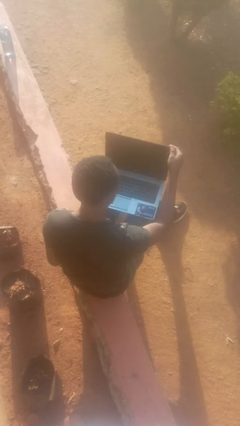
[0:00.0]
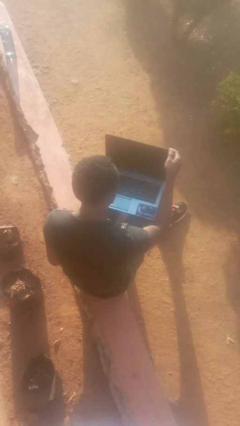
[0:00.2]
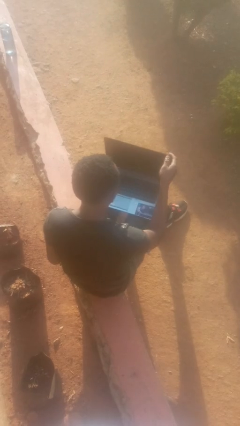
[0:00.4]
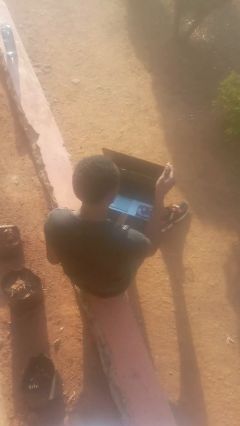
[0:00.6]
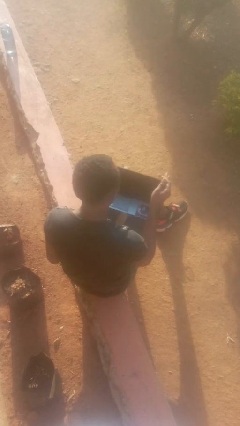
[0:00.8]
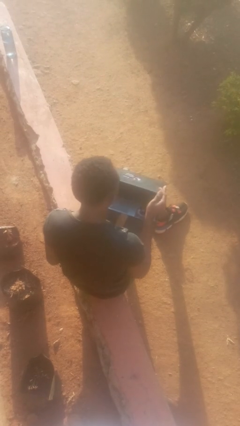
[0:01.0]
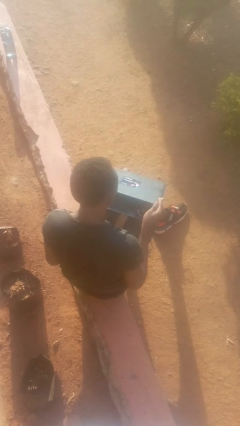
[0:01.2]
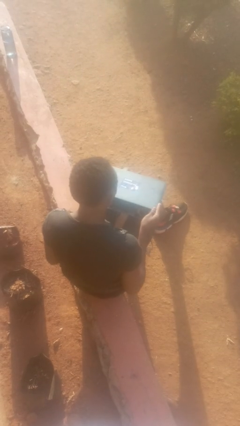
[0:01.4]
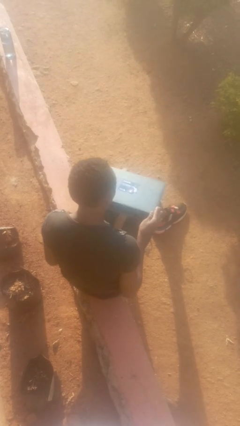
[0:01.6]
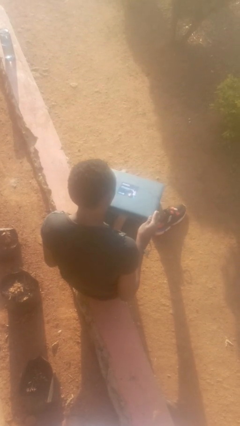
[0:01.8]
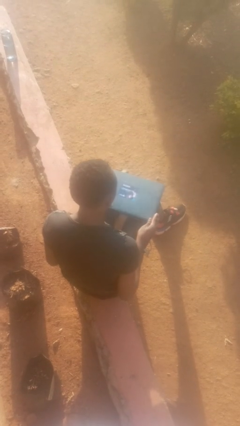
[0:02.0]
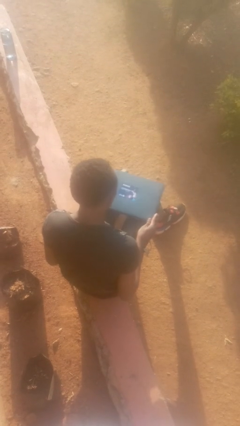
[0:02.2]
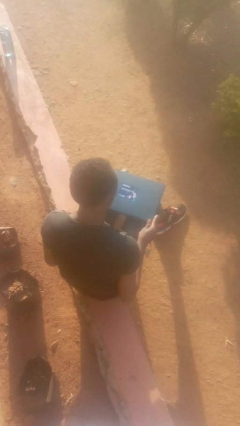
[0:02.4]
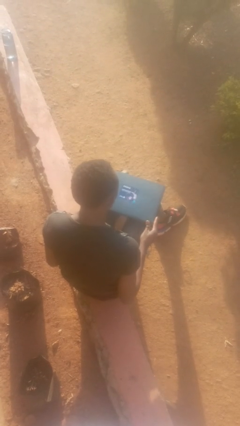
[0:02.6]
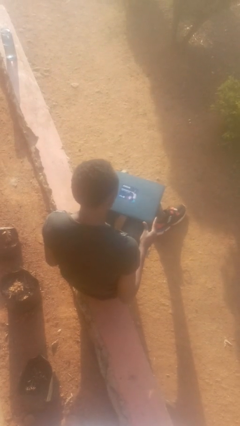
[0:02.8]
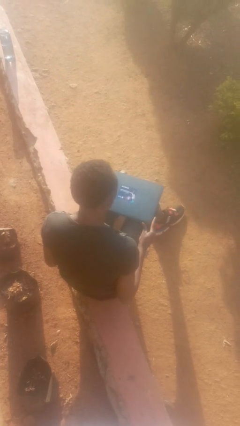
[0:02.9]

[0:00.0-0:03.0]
person closes laptop

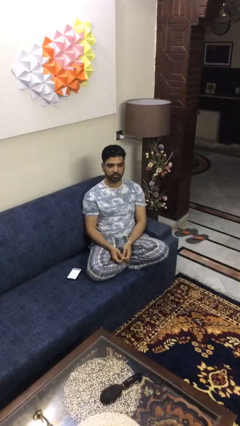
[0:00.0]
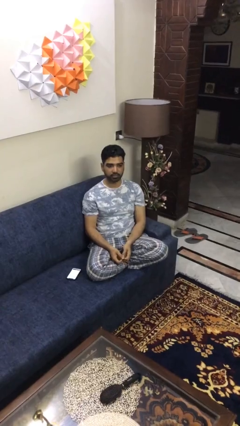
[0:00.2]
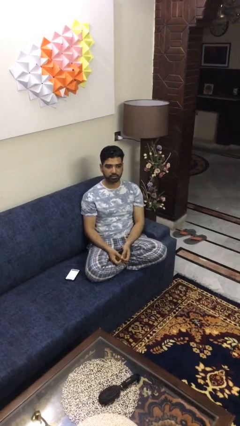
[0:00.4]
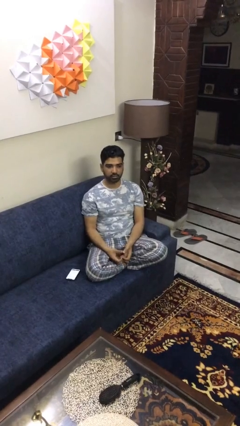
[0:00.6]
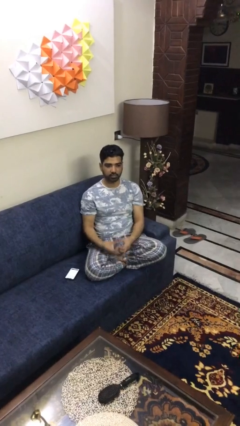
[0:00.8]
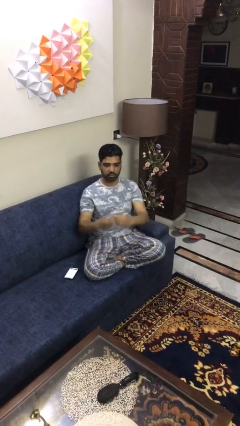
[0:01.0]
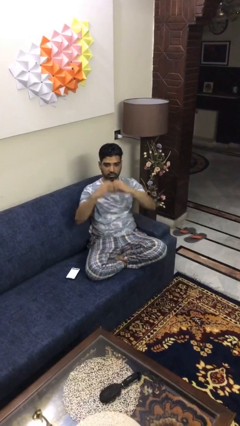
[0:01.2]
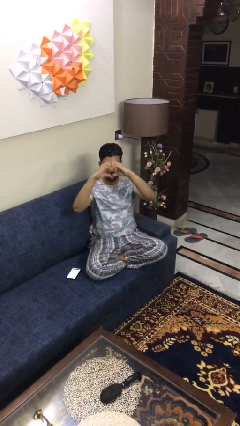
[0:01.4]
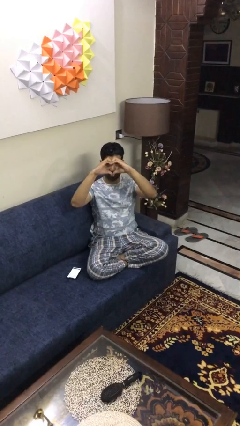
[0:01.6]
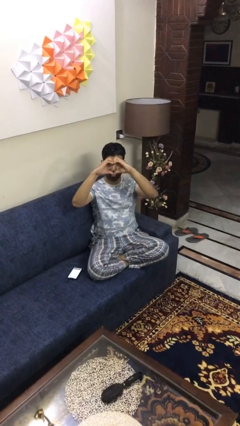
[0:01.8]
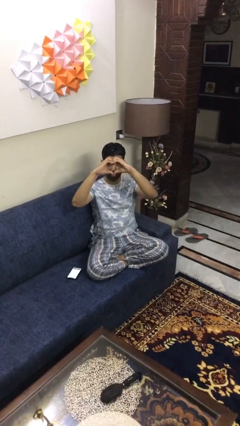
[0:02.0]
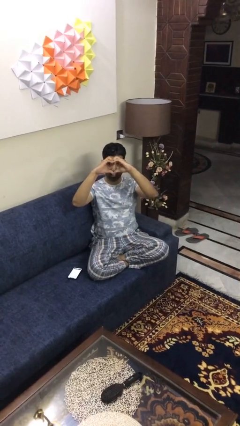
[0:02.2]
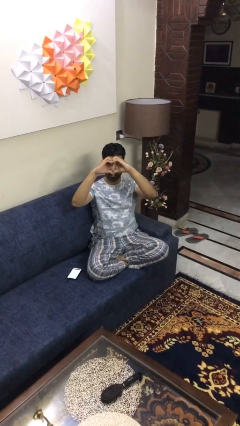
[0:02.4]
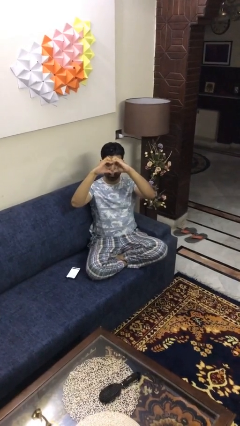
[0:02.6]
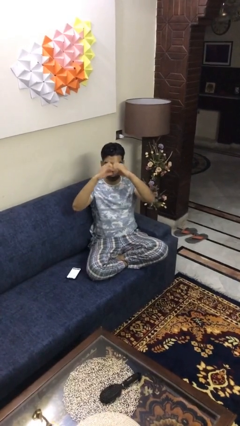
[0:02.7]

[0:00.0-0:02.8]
person gestures heart

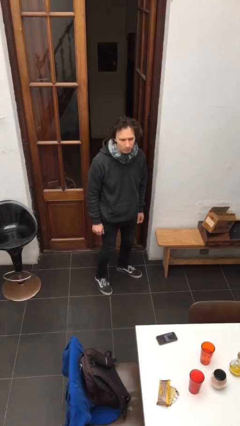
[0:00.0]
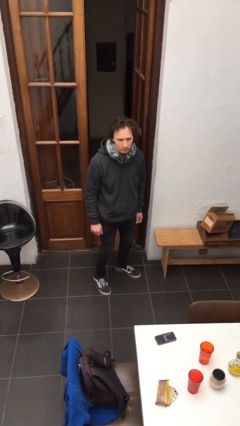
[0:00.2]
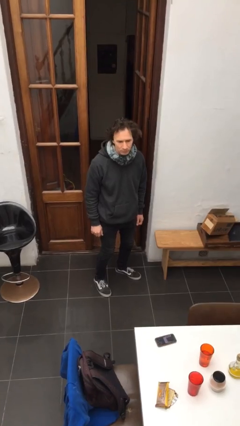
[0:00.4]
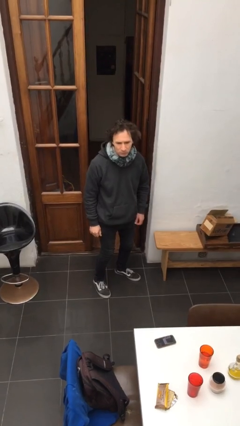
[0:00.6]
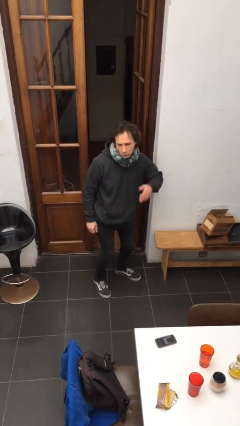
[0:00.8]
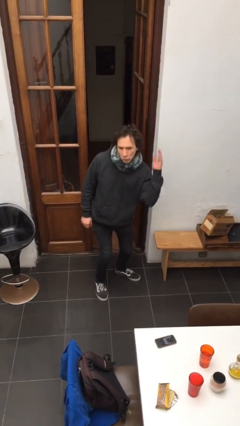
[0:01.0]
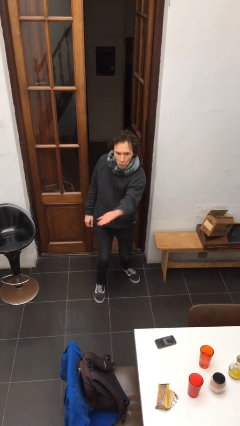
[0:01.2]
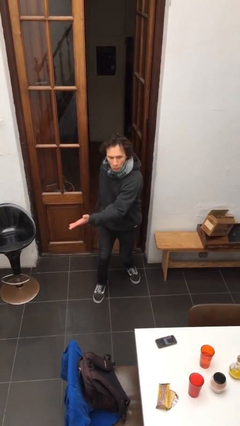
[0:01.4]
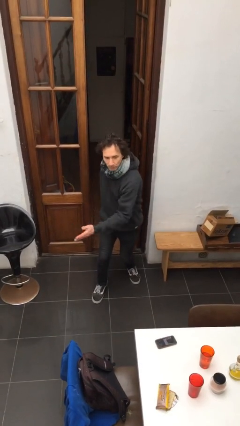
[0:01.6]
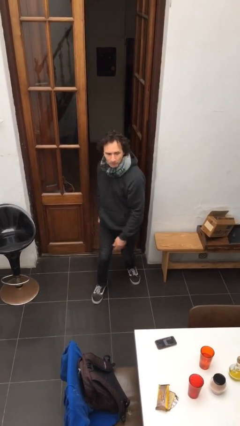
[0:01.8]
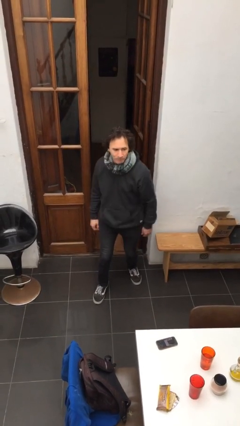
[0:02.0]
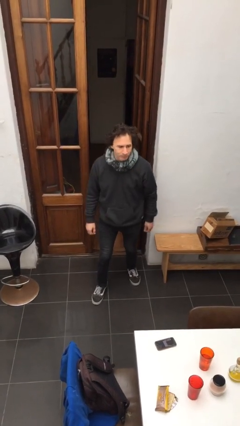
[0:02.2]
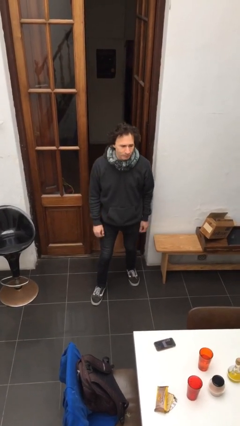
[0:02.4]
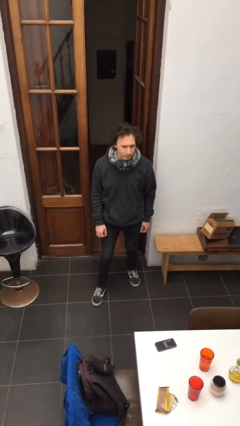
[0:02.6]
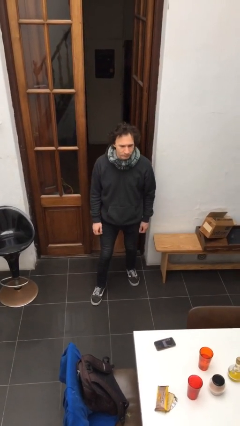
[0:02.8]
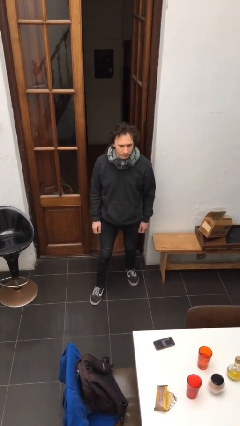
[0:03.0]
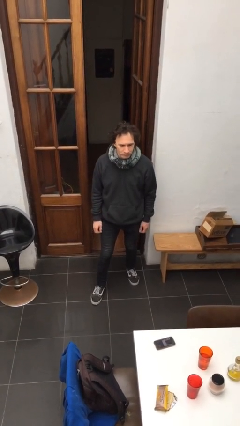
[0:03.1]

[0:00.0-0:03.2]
person karate chop

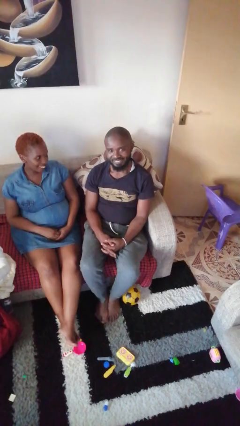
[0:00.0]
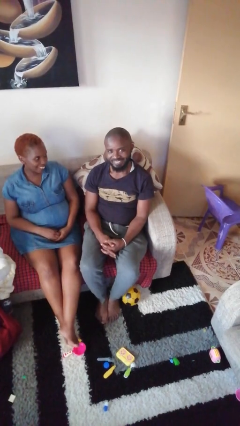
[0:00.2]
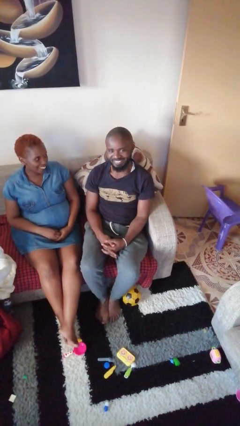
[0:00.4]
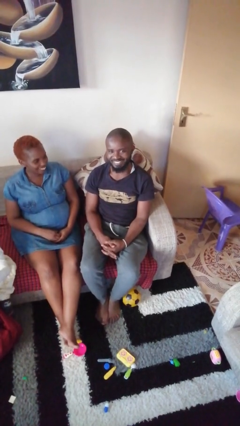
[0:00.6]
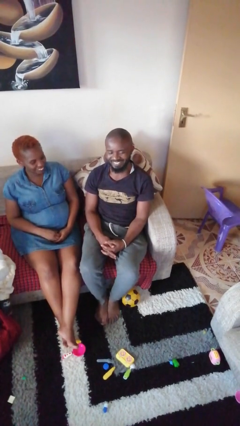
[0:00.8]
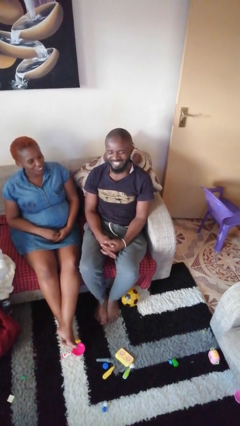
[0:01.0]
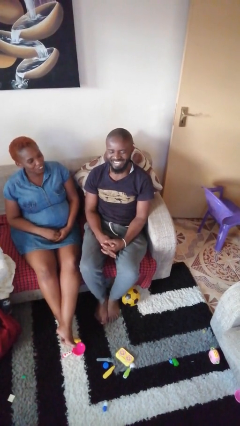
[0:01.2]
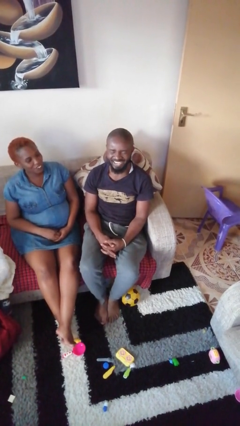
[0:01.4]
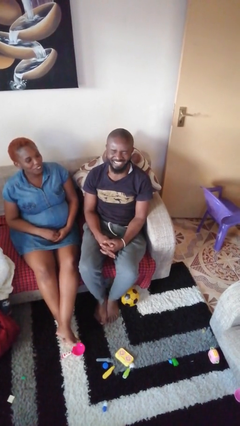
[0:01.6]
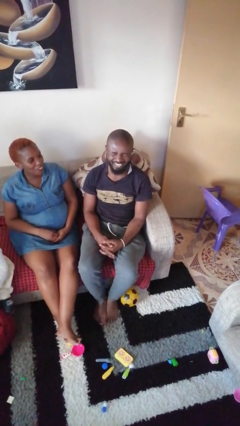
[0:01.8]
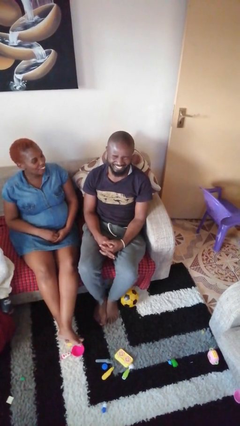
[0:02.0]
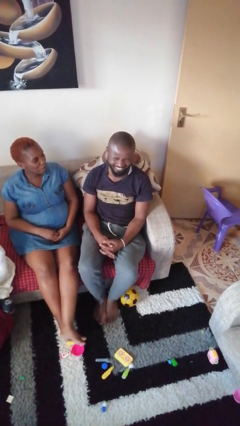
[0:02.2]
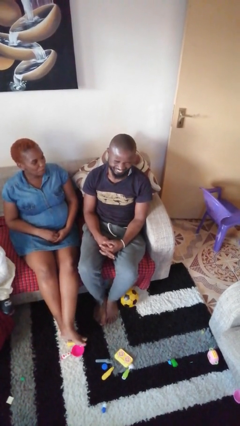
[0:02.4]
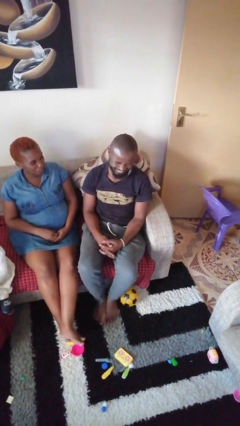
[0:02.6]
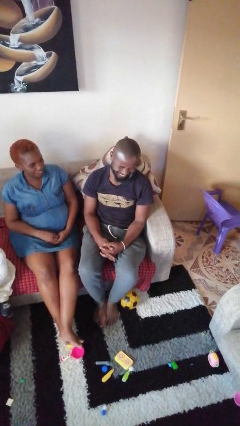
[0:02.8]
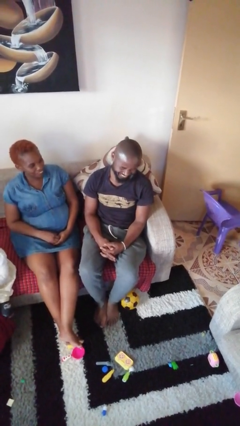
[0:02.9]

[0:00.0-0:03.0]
person laughs with person

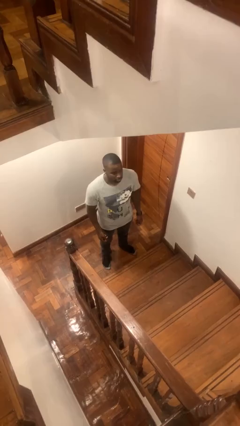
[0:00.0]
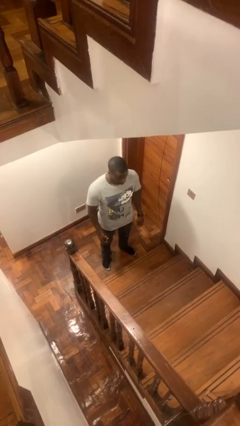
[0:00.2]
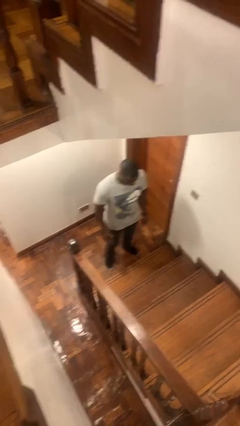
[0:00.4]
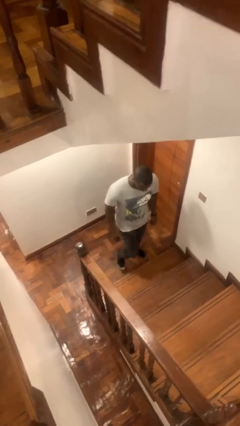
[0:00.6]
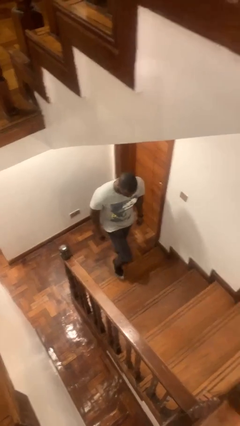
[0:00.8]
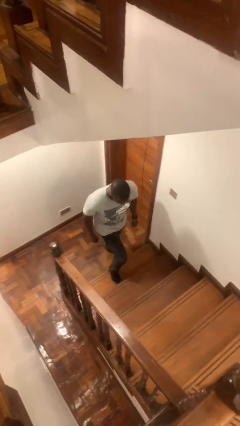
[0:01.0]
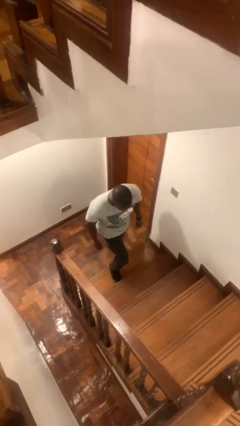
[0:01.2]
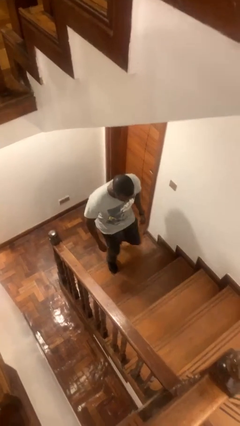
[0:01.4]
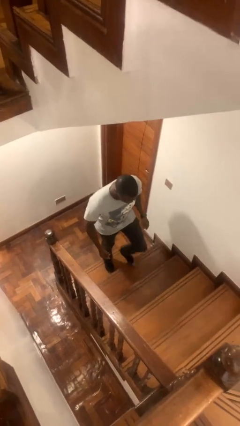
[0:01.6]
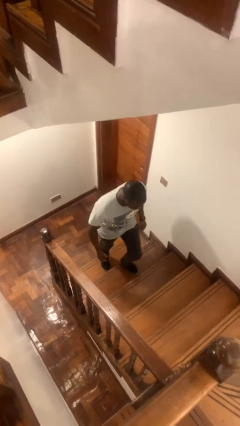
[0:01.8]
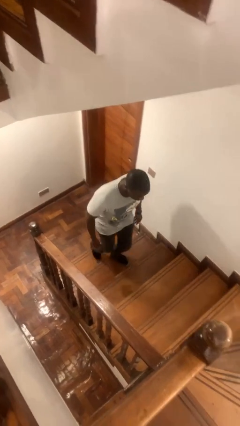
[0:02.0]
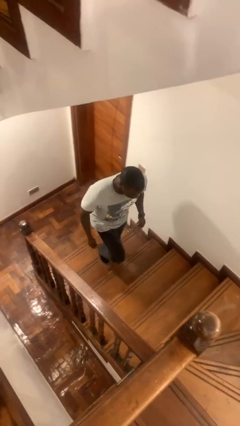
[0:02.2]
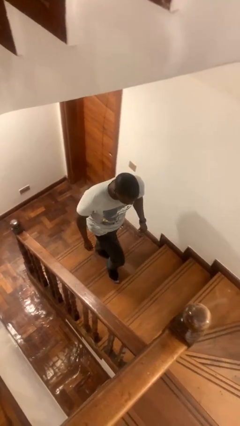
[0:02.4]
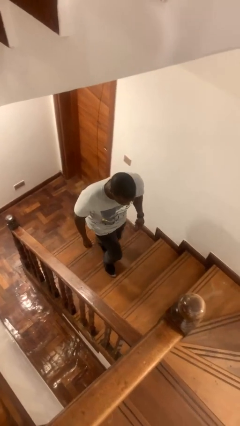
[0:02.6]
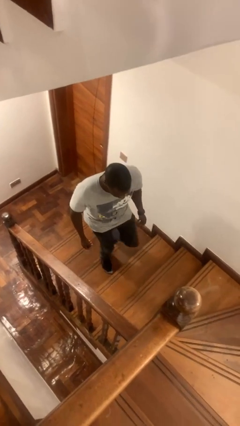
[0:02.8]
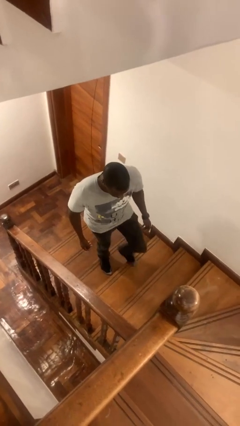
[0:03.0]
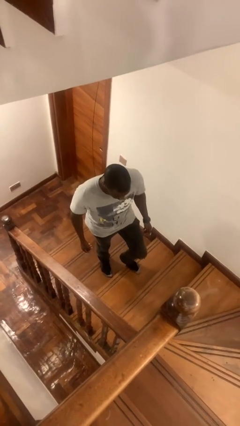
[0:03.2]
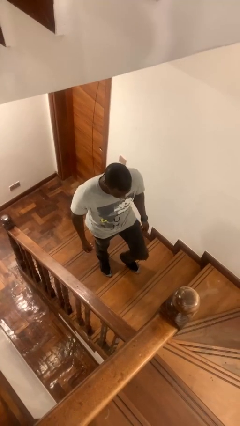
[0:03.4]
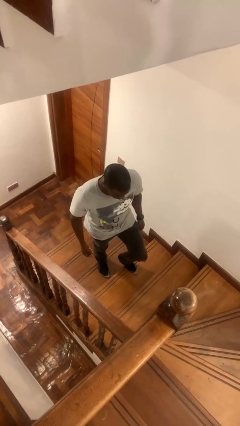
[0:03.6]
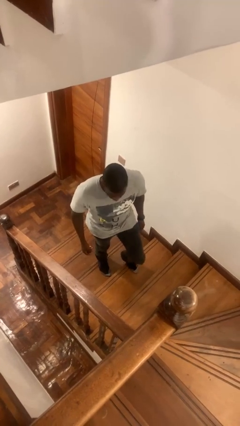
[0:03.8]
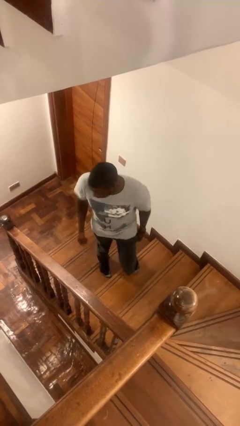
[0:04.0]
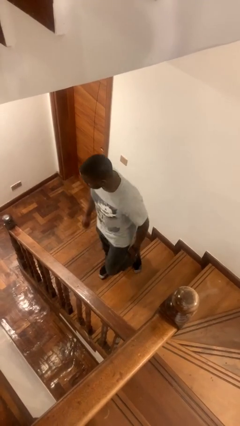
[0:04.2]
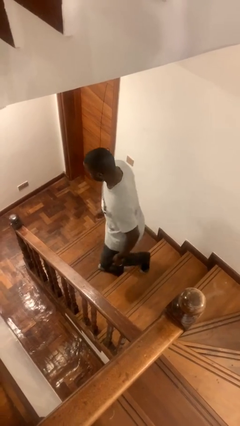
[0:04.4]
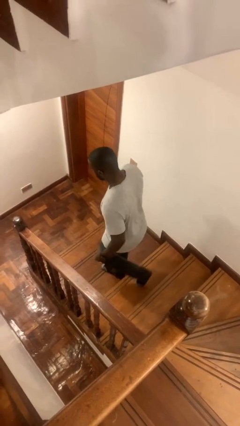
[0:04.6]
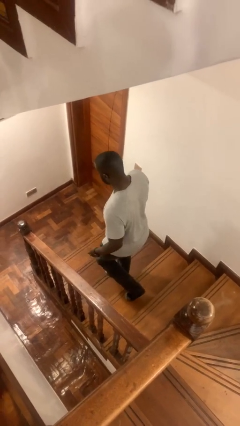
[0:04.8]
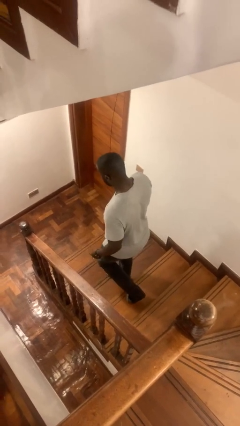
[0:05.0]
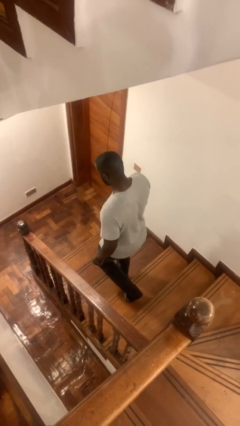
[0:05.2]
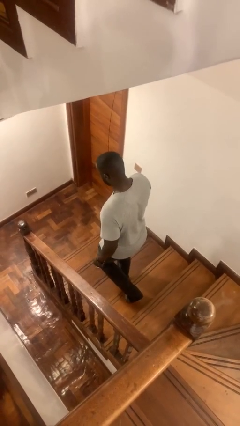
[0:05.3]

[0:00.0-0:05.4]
person climbs up stairs

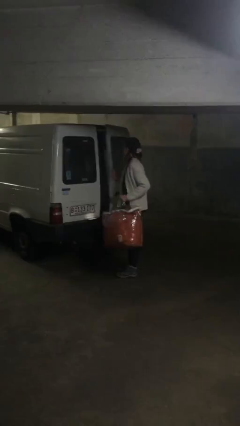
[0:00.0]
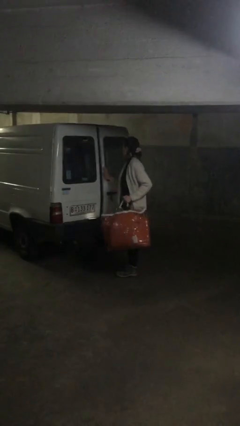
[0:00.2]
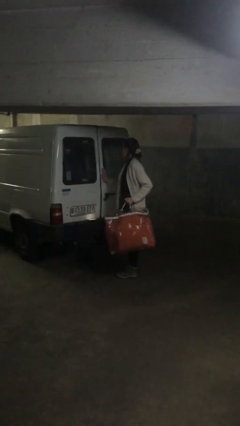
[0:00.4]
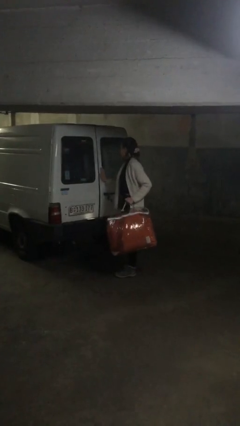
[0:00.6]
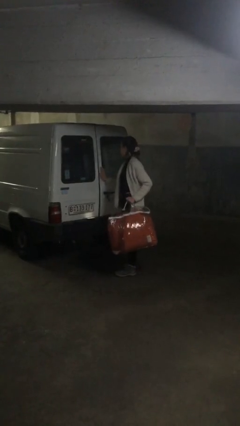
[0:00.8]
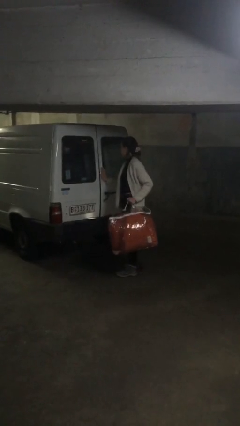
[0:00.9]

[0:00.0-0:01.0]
person closes car door
